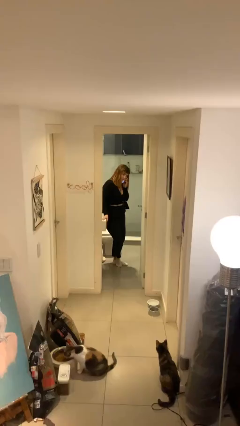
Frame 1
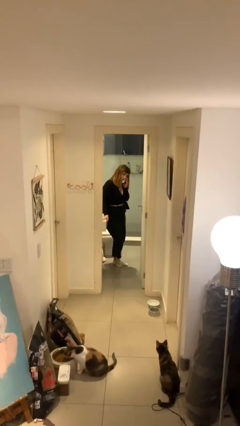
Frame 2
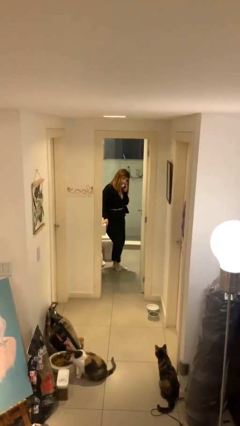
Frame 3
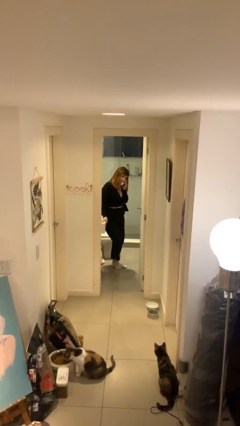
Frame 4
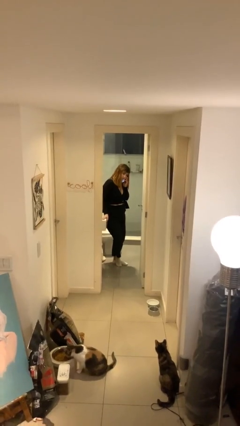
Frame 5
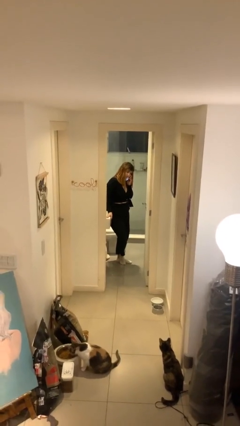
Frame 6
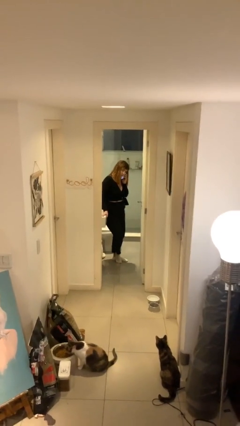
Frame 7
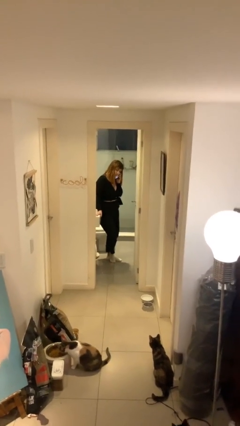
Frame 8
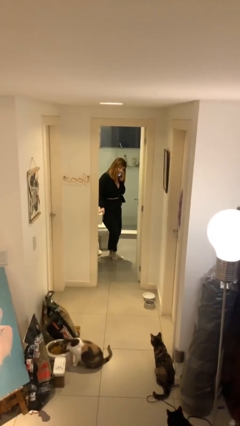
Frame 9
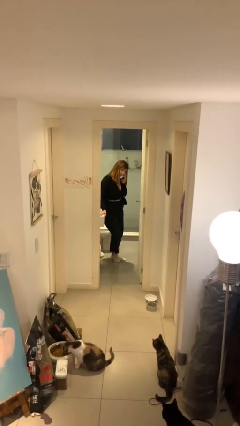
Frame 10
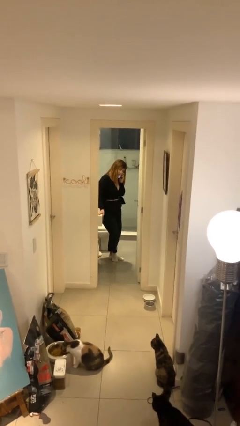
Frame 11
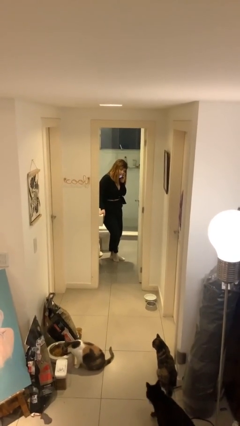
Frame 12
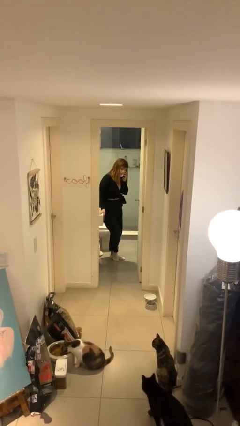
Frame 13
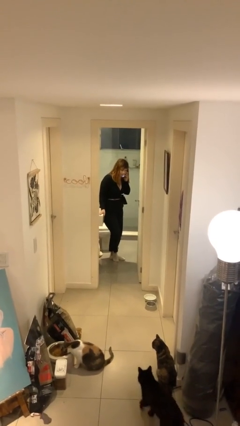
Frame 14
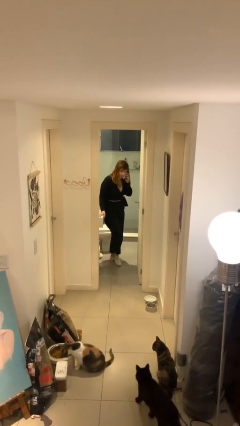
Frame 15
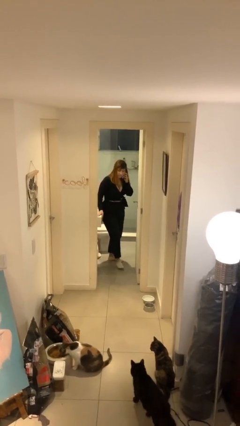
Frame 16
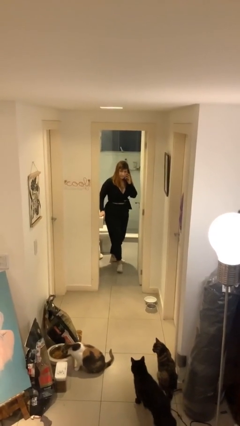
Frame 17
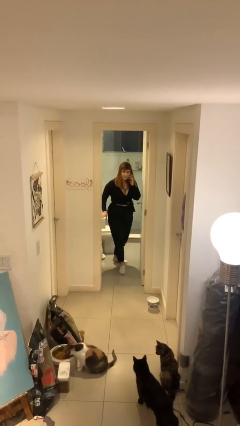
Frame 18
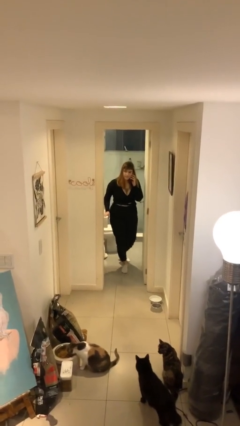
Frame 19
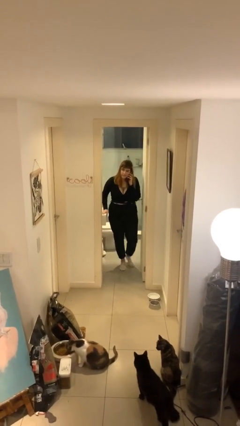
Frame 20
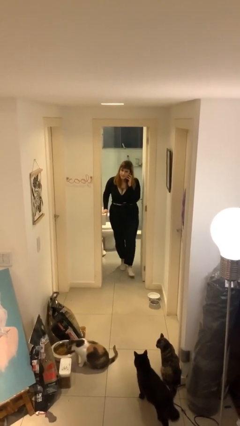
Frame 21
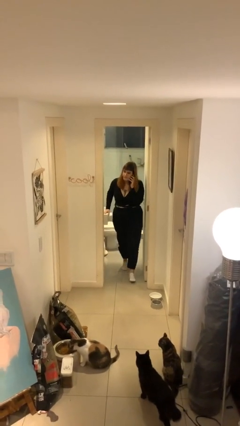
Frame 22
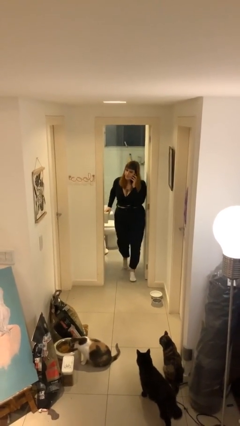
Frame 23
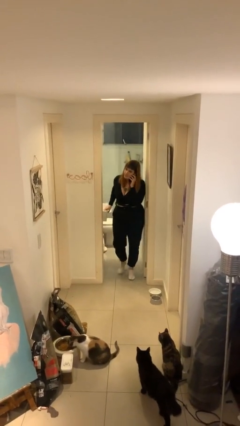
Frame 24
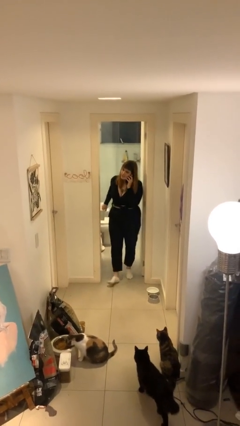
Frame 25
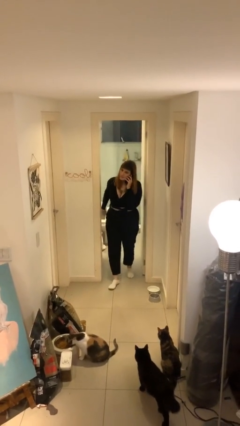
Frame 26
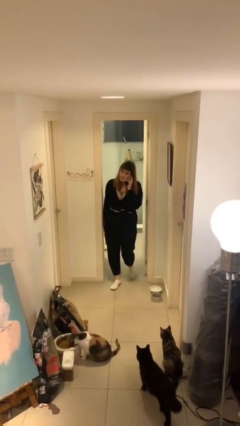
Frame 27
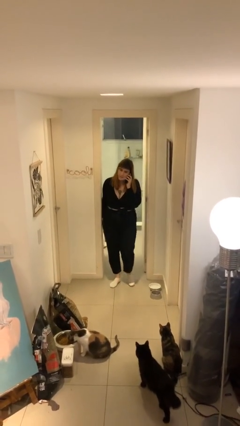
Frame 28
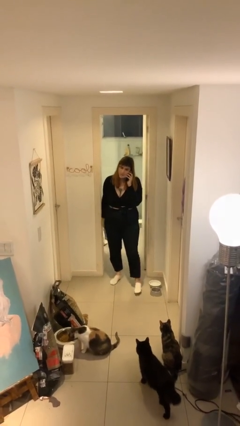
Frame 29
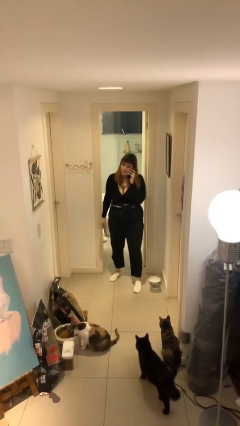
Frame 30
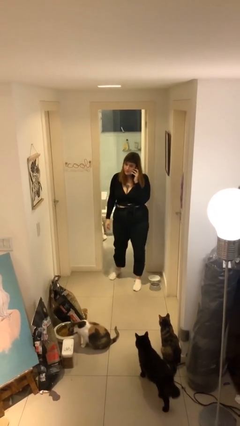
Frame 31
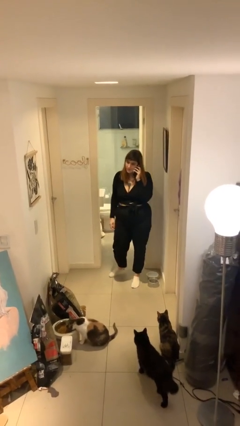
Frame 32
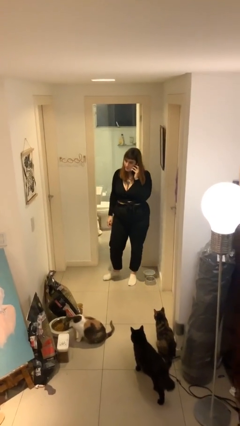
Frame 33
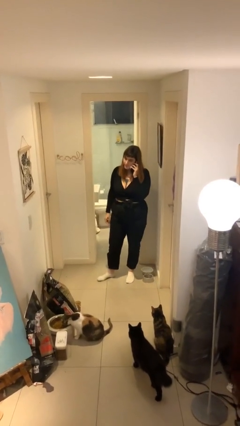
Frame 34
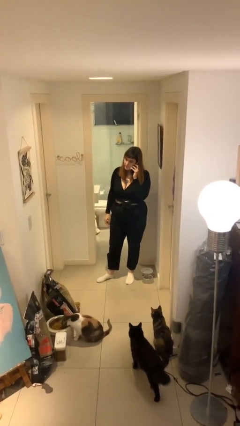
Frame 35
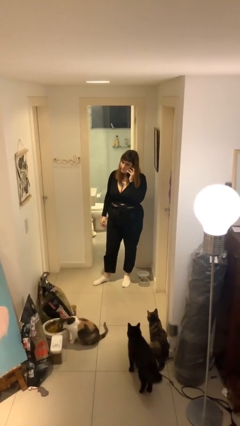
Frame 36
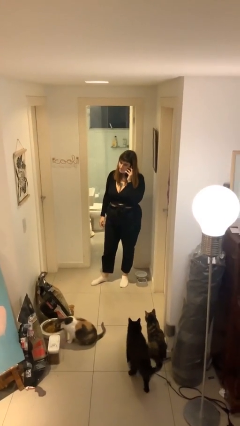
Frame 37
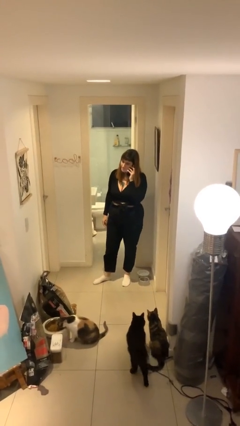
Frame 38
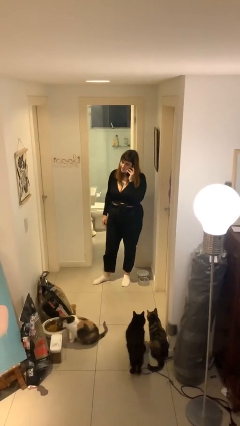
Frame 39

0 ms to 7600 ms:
person enters scene through structure

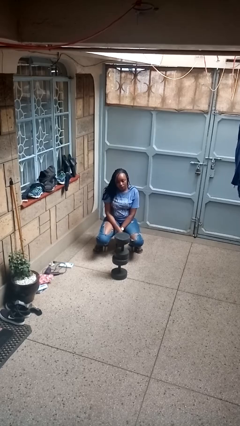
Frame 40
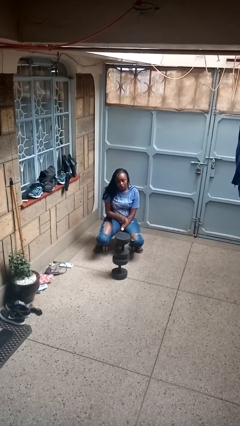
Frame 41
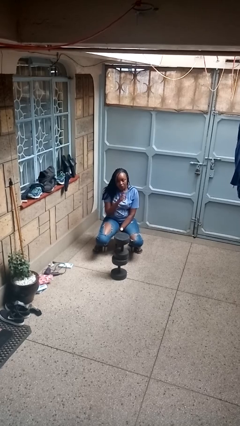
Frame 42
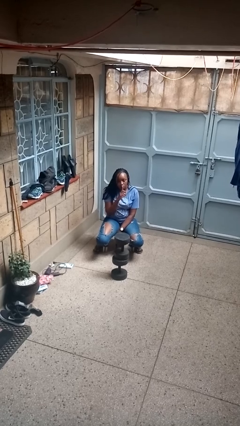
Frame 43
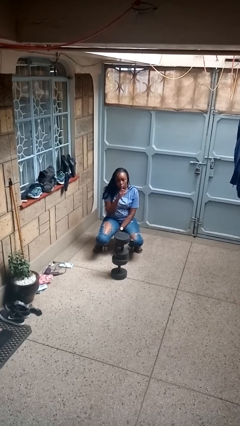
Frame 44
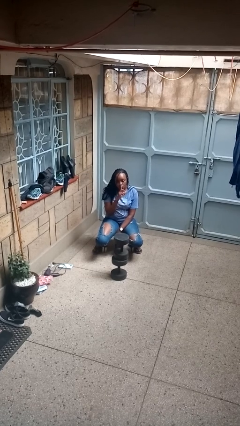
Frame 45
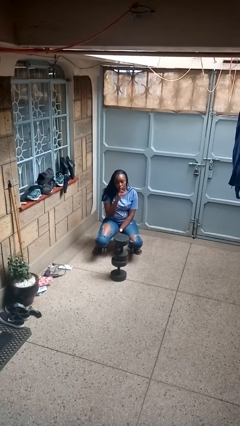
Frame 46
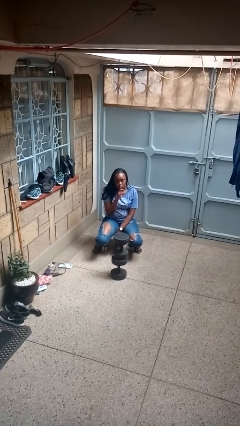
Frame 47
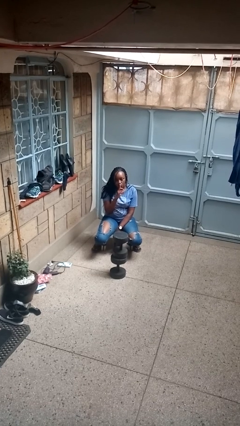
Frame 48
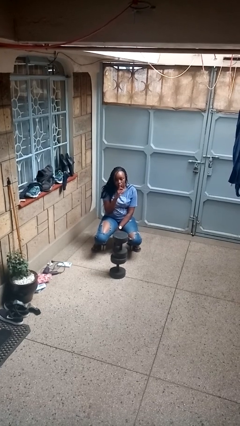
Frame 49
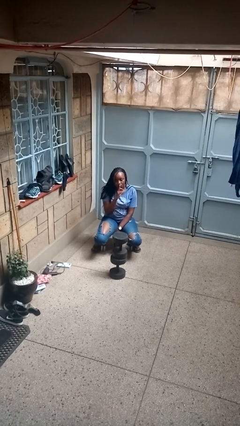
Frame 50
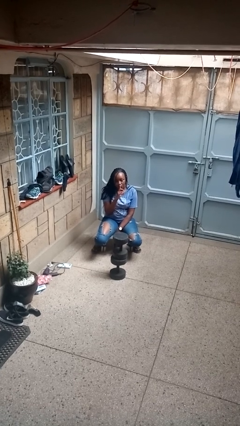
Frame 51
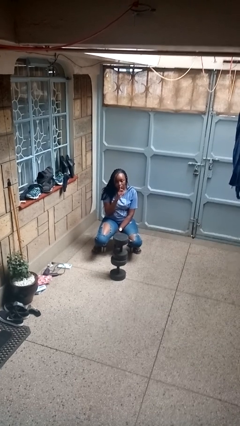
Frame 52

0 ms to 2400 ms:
person gestures be quiet

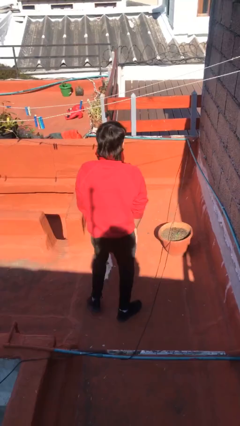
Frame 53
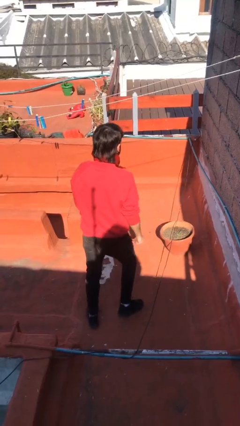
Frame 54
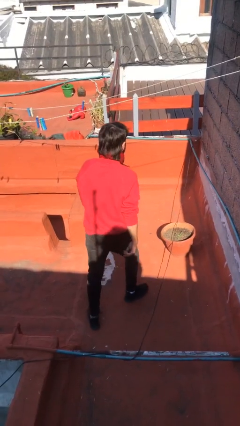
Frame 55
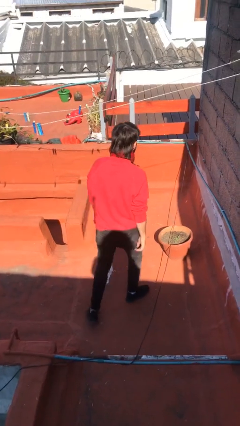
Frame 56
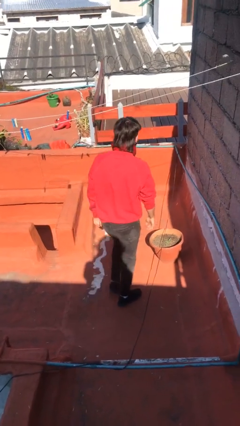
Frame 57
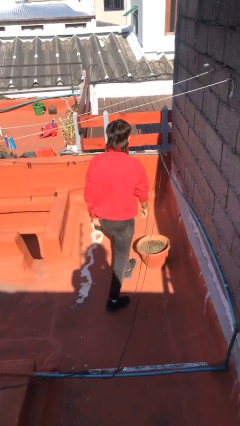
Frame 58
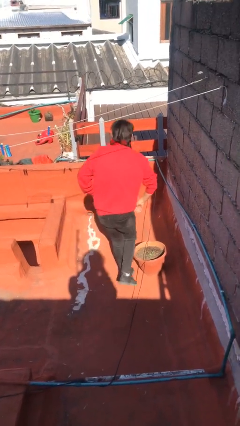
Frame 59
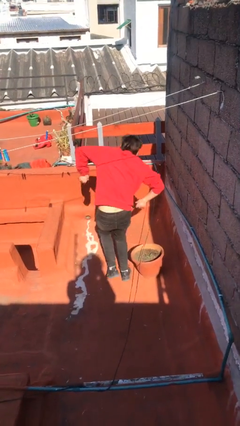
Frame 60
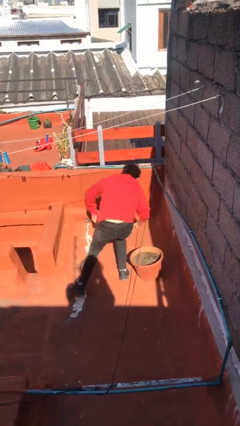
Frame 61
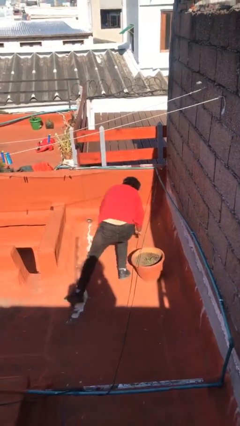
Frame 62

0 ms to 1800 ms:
person trips on object on floor

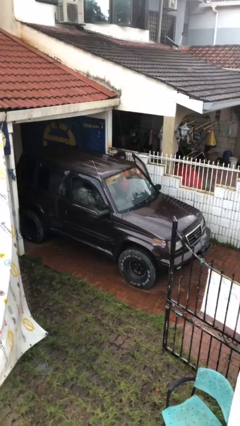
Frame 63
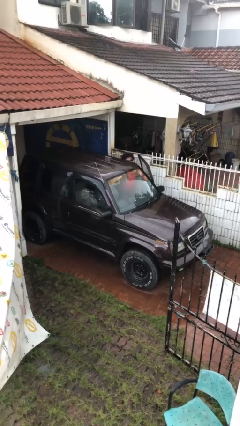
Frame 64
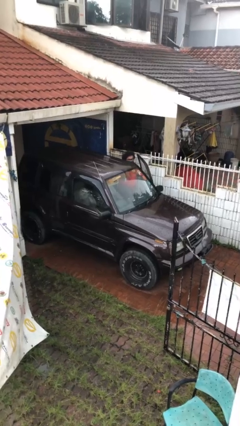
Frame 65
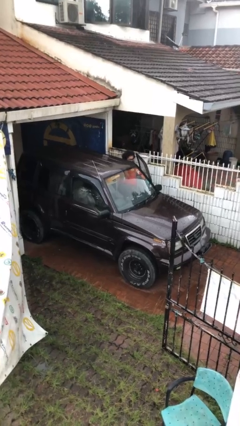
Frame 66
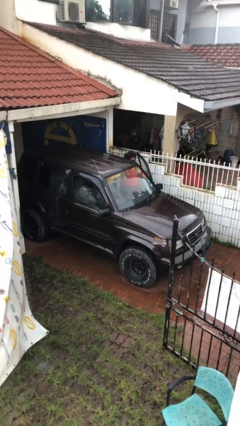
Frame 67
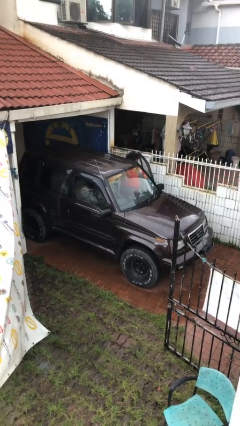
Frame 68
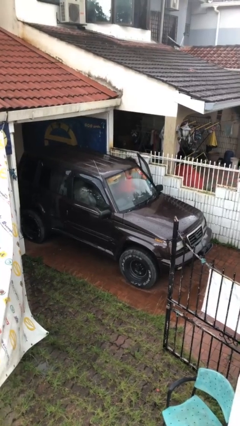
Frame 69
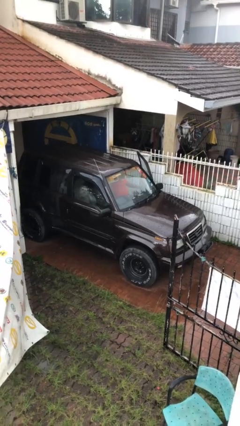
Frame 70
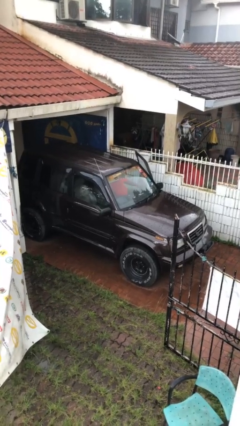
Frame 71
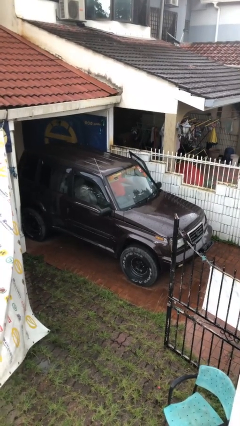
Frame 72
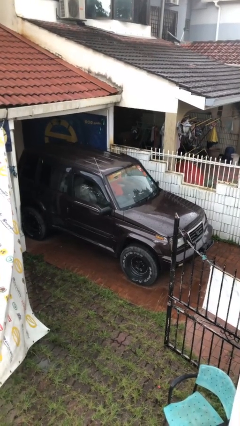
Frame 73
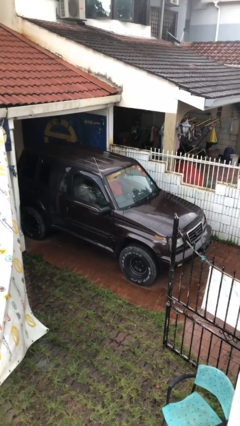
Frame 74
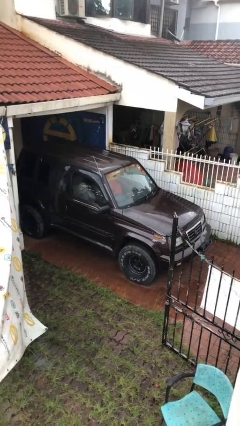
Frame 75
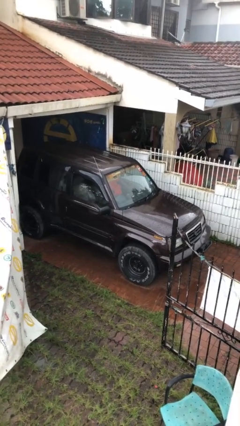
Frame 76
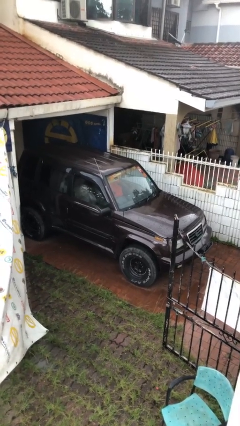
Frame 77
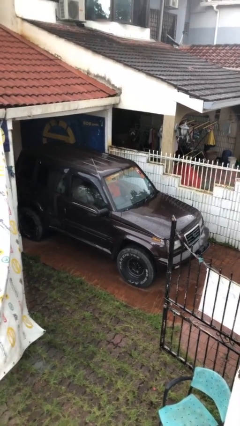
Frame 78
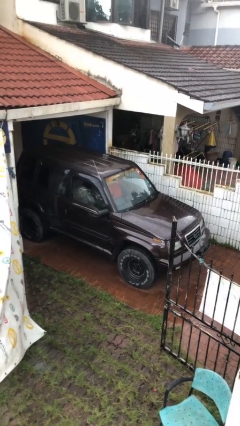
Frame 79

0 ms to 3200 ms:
car picks up person

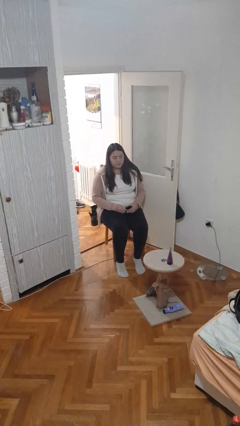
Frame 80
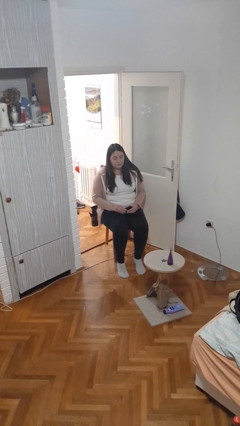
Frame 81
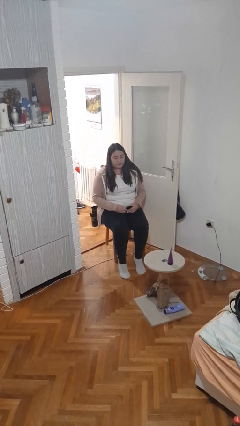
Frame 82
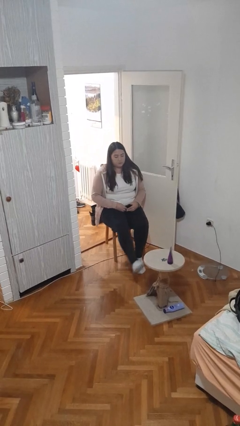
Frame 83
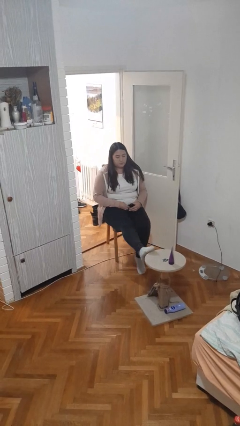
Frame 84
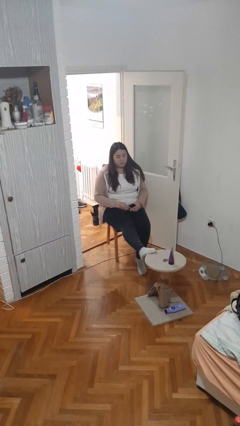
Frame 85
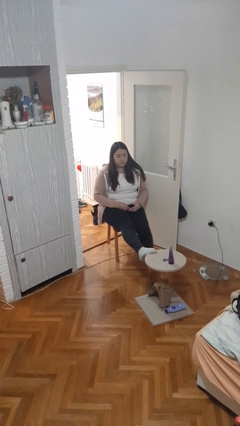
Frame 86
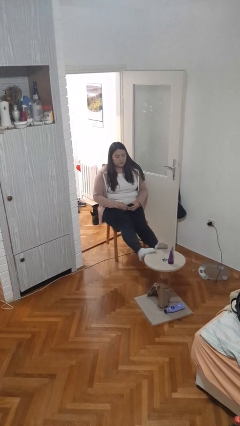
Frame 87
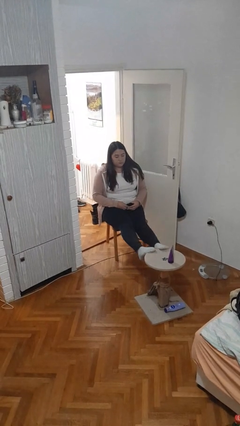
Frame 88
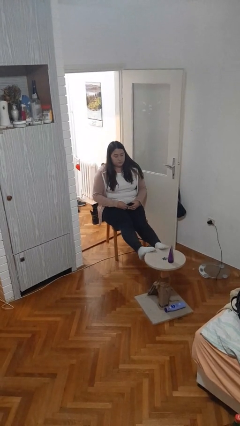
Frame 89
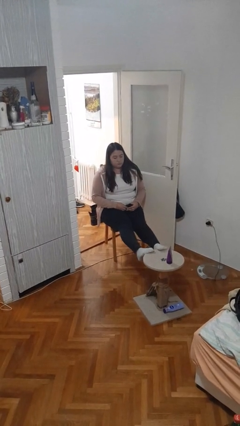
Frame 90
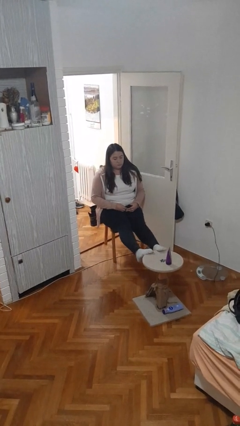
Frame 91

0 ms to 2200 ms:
person puts feet up

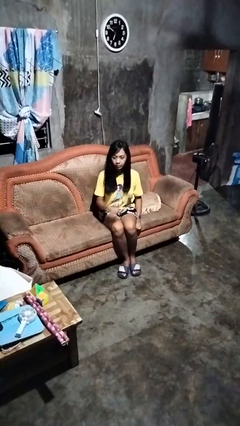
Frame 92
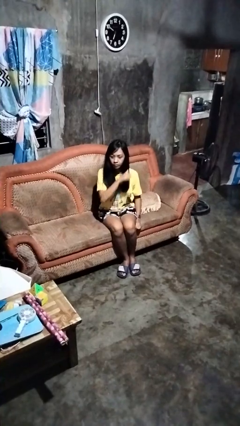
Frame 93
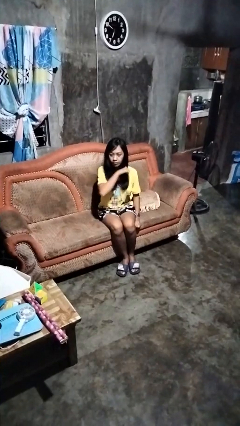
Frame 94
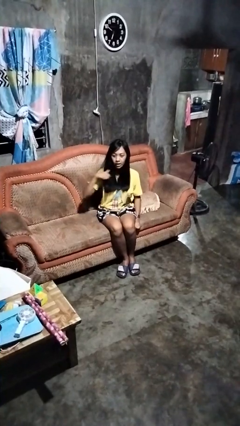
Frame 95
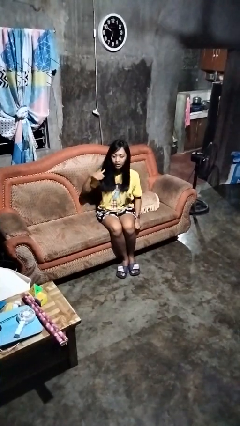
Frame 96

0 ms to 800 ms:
person gestures cut
